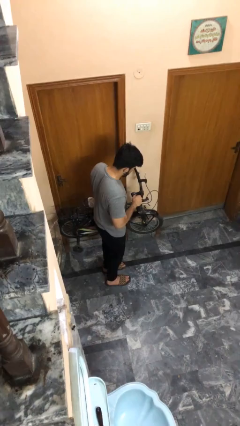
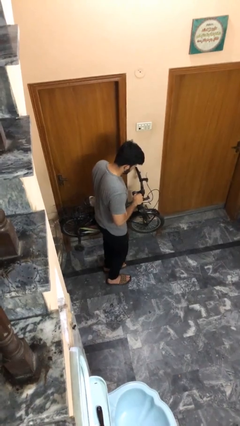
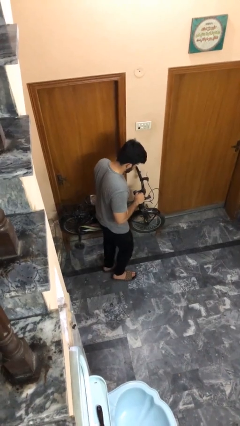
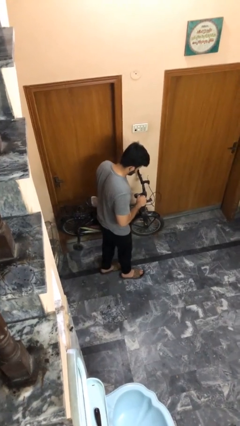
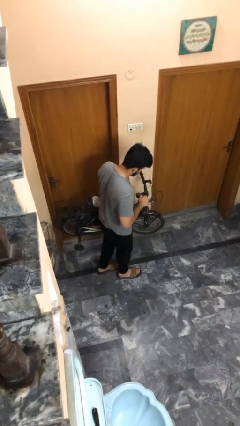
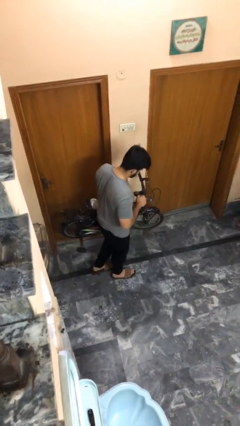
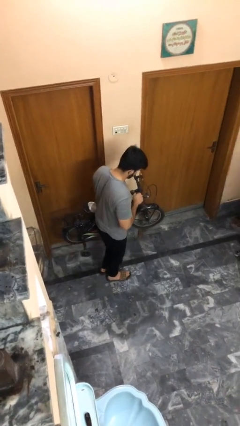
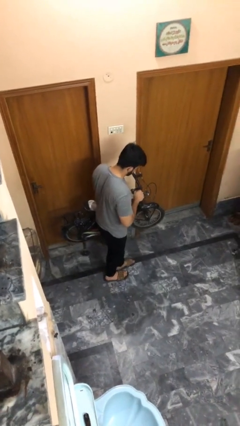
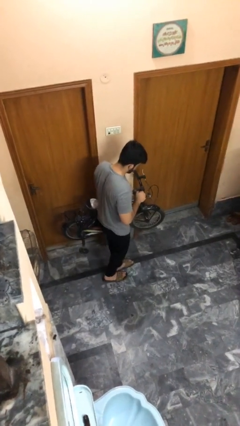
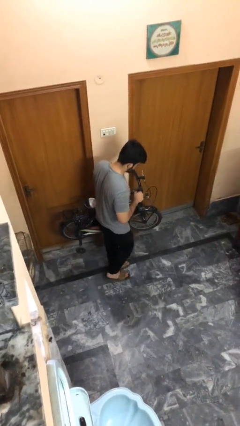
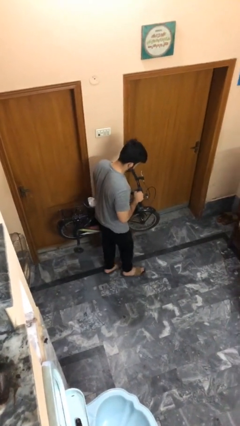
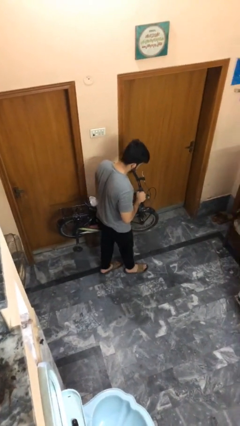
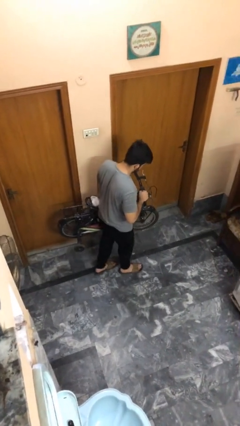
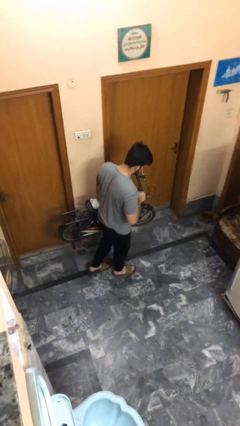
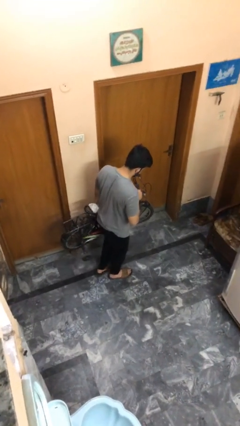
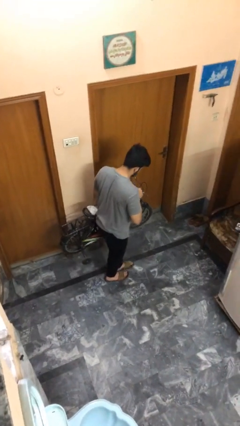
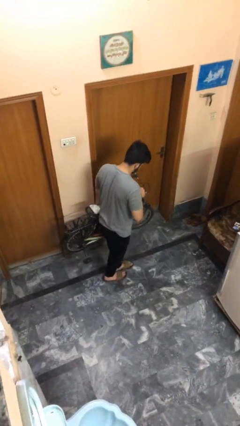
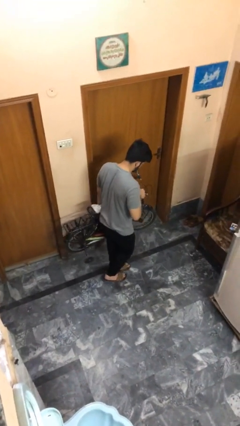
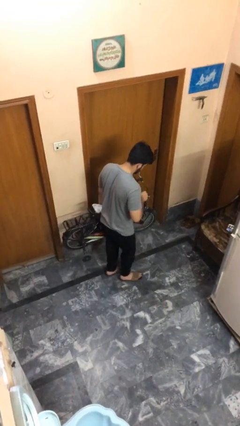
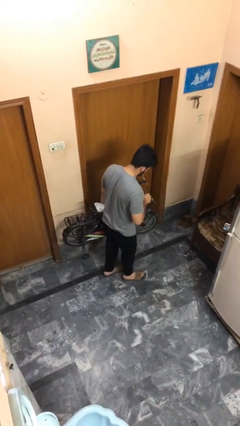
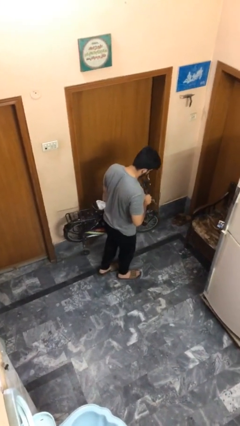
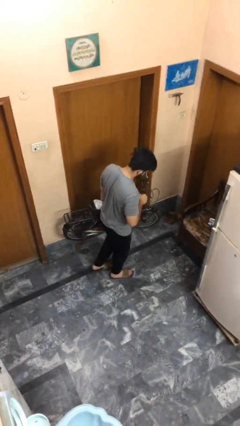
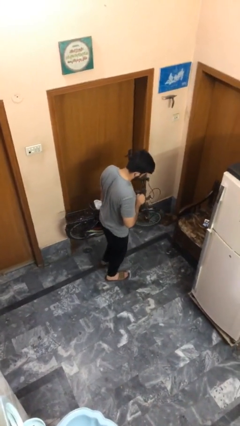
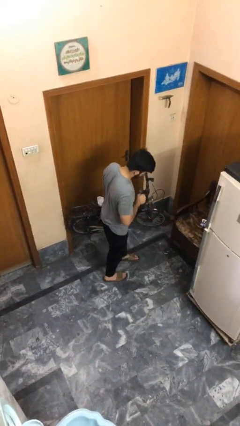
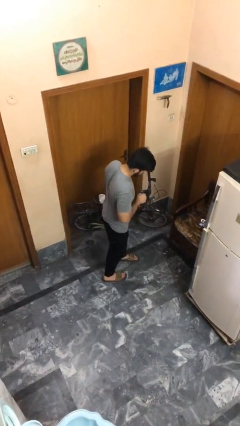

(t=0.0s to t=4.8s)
person carries bicycle

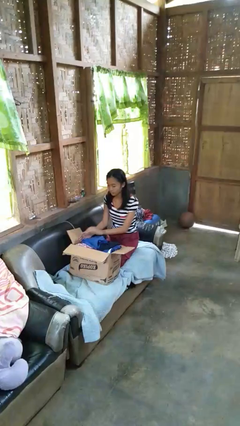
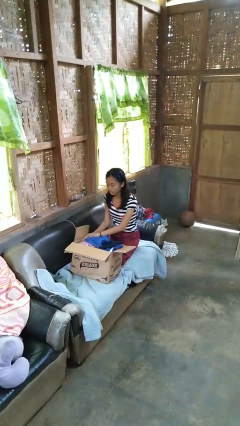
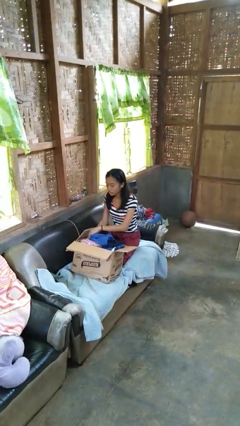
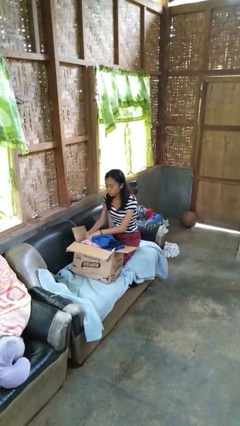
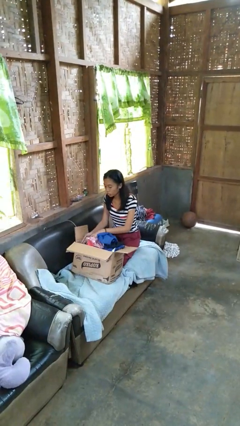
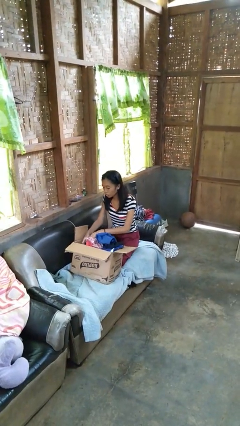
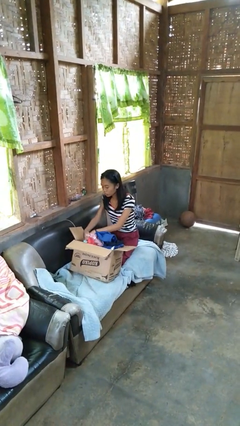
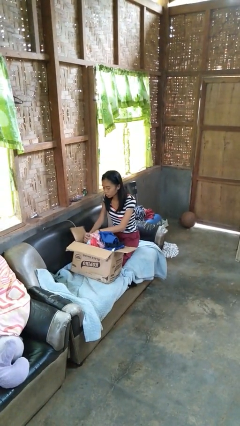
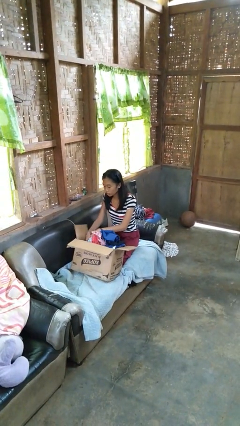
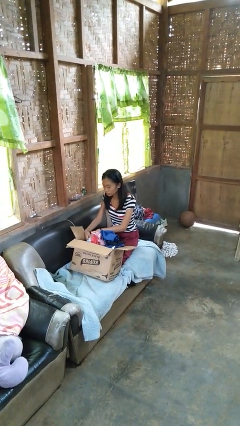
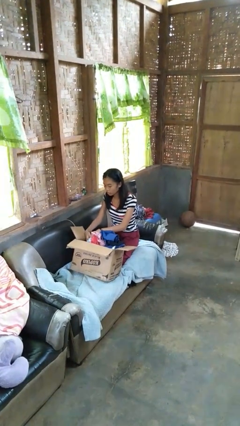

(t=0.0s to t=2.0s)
person searches in box

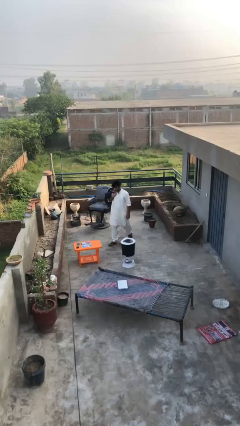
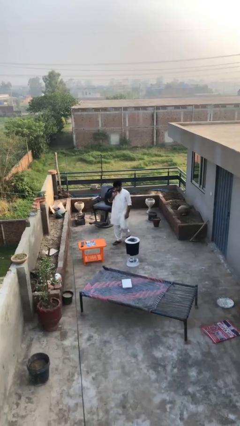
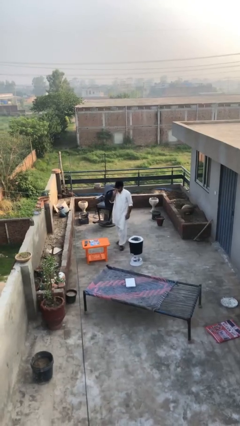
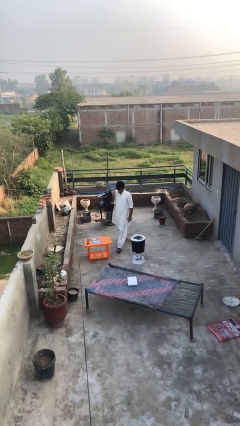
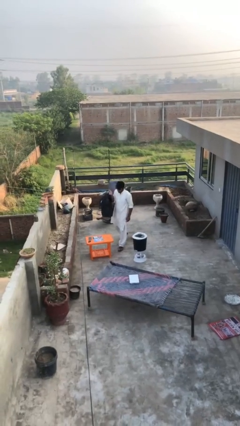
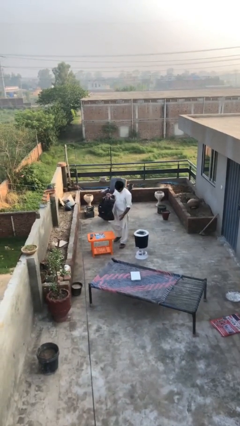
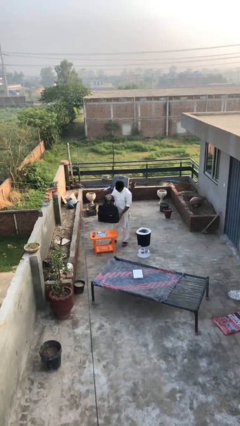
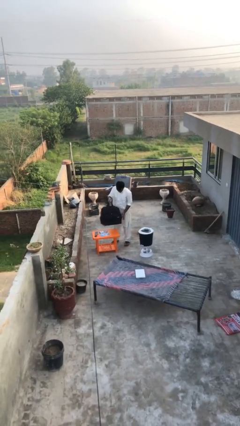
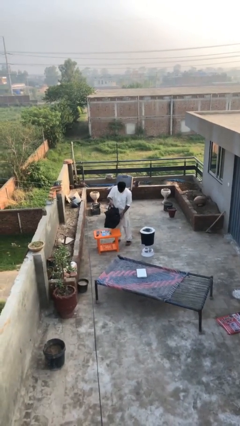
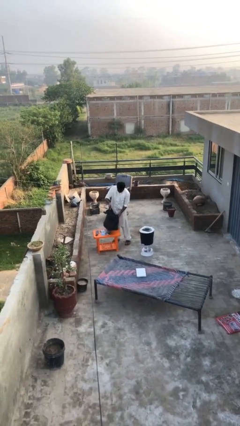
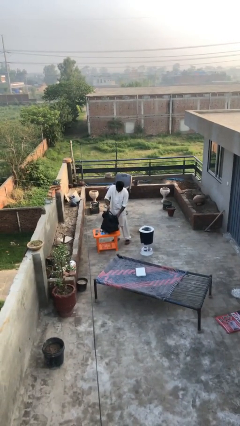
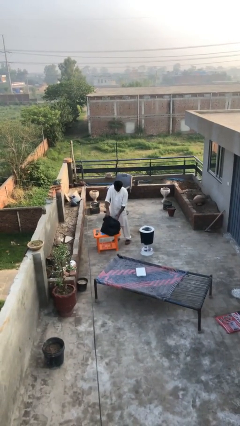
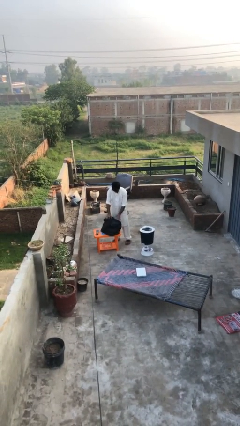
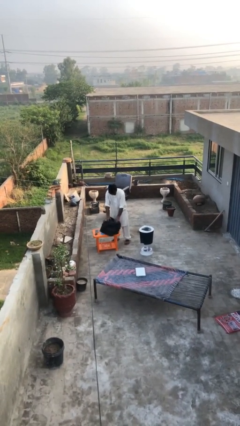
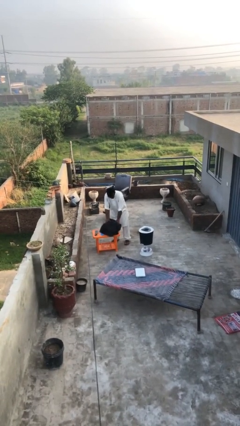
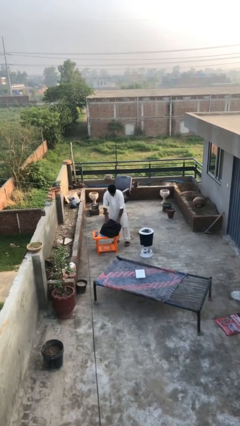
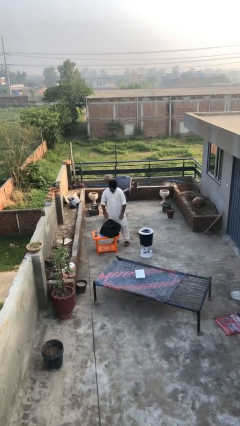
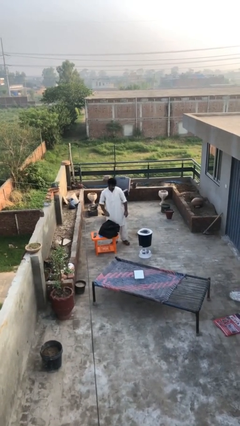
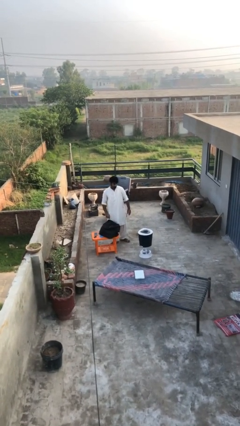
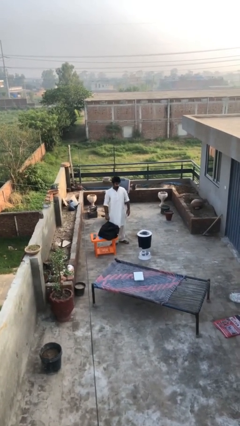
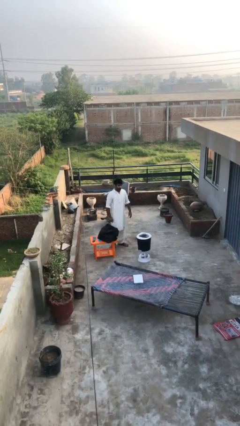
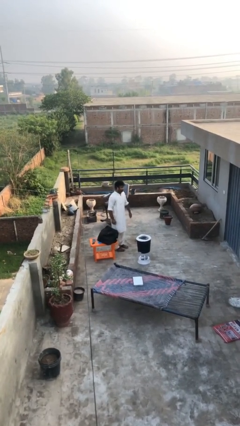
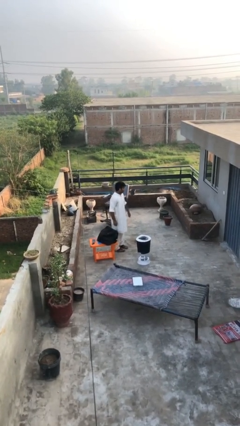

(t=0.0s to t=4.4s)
person puts down object on table

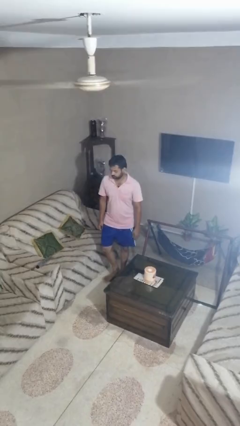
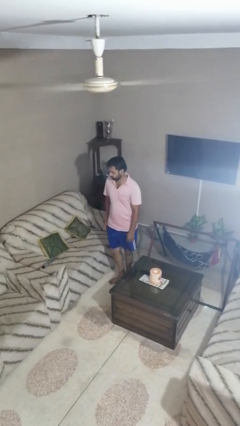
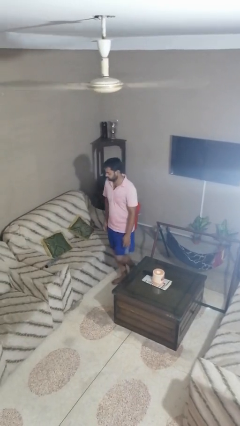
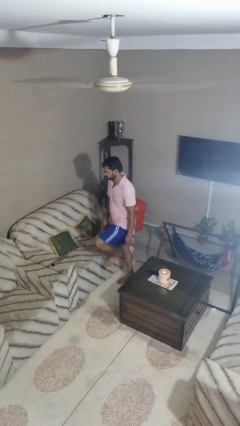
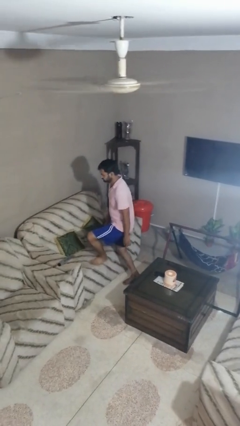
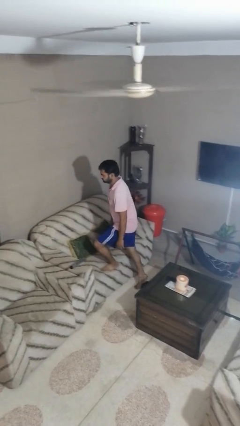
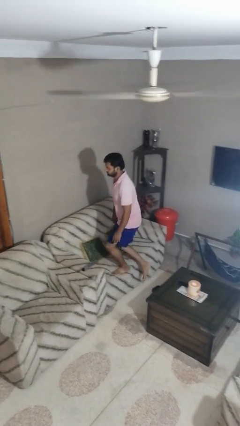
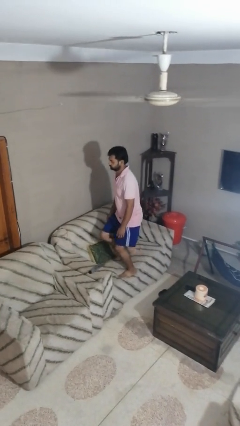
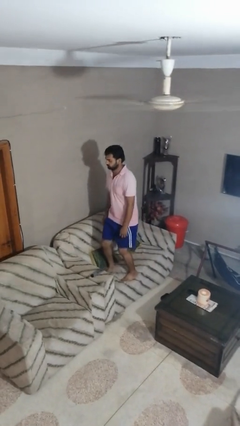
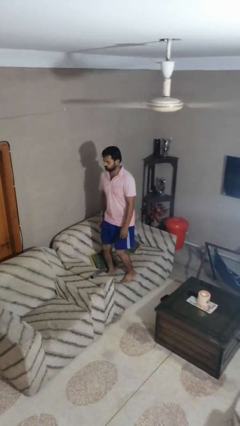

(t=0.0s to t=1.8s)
person climbs on couch

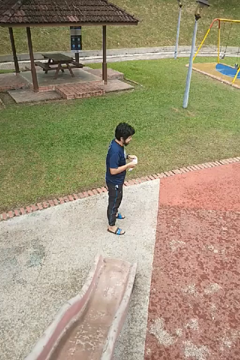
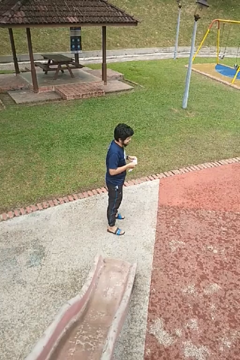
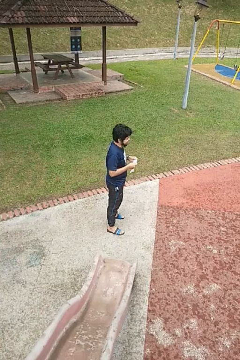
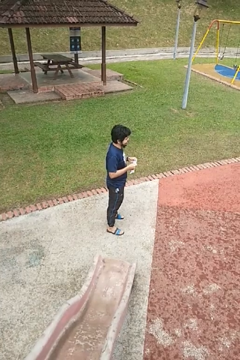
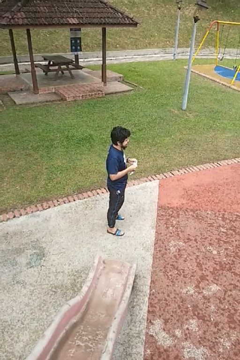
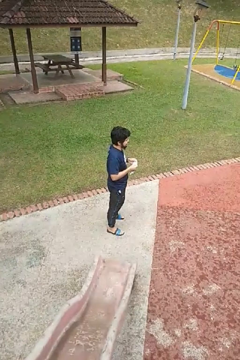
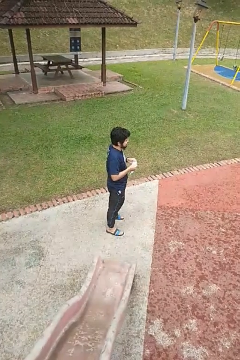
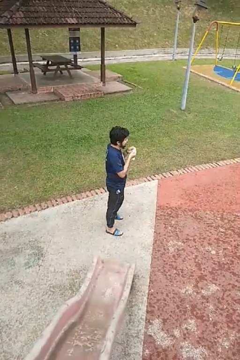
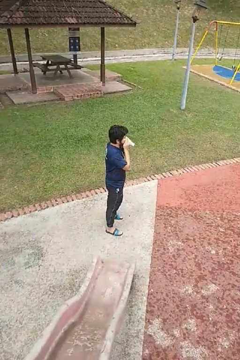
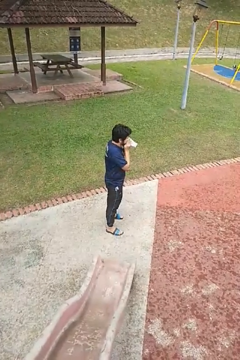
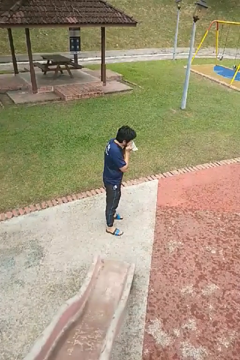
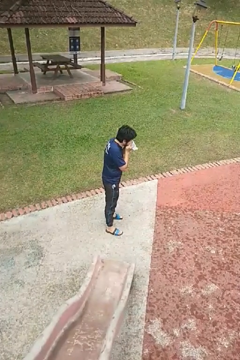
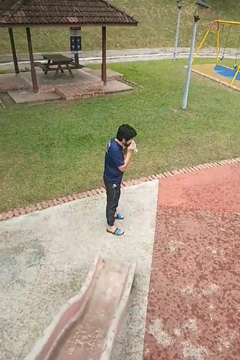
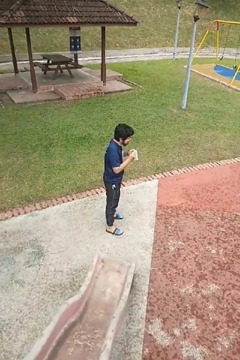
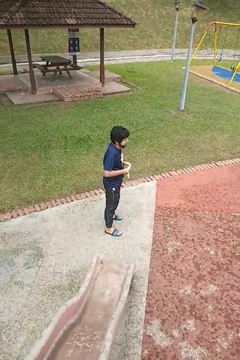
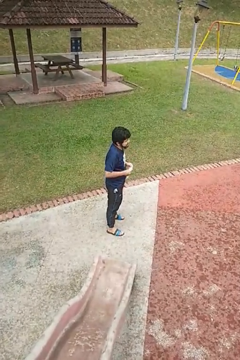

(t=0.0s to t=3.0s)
person blows nose

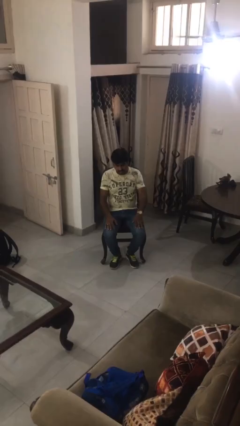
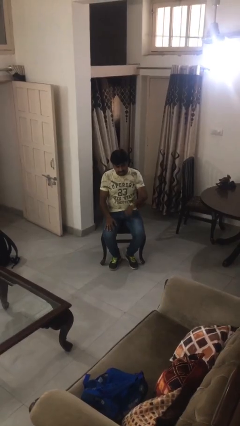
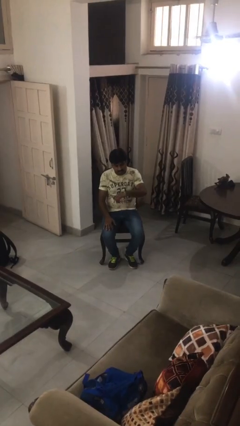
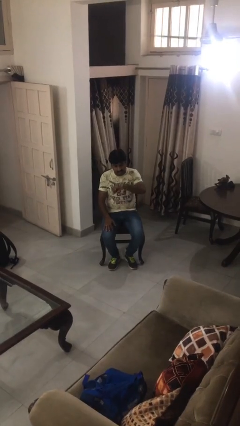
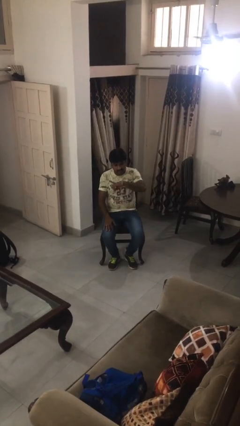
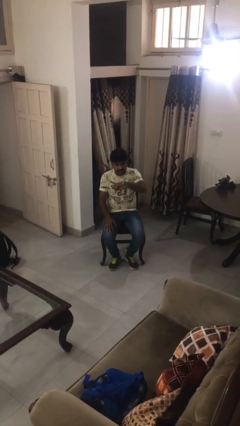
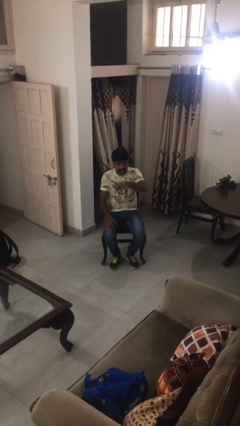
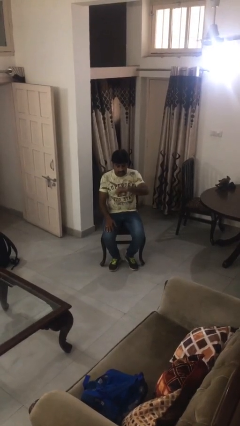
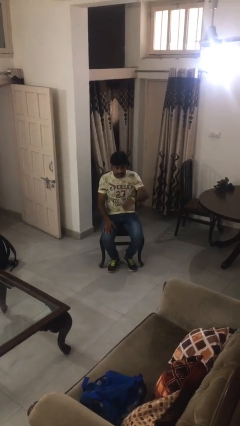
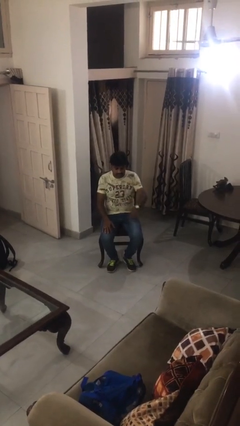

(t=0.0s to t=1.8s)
person looks at wristwatch
